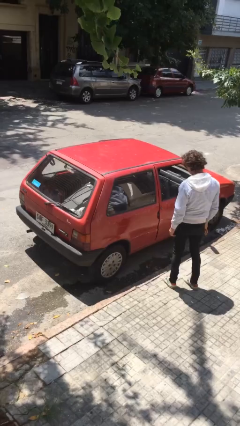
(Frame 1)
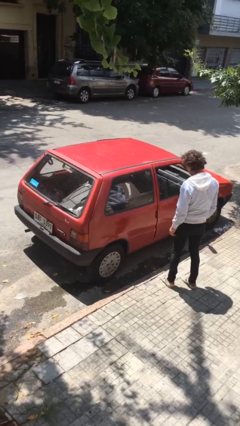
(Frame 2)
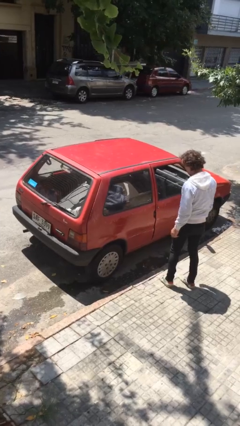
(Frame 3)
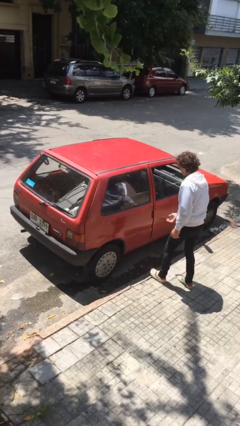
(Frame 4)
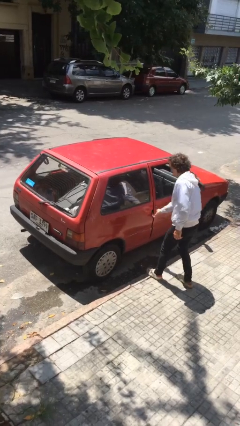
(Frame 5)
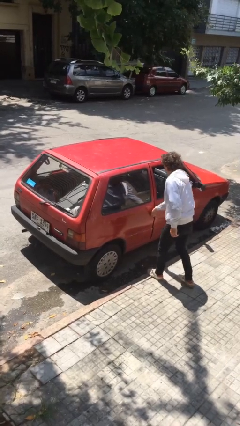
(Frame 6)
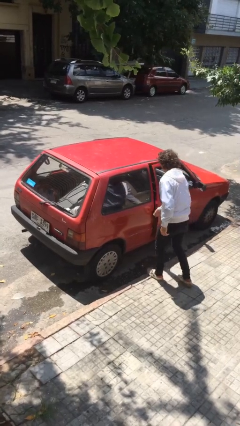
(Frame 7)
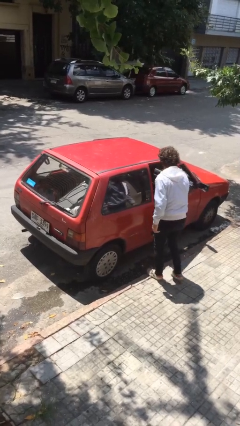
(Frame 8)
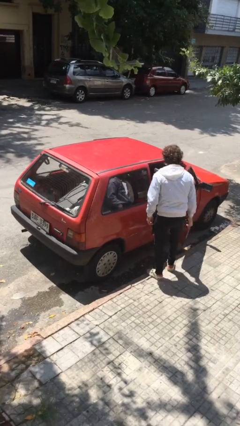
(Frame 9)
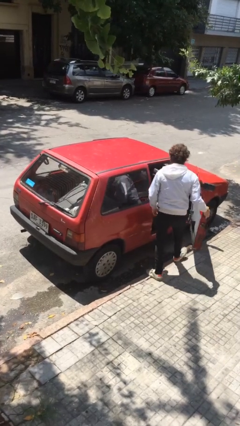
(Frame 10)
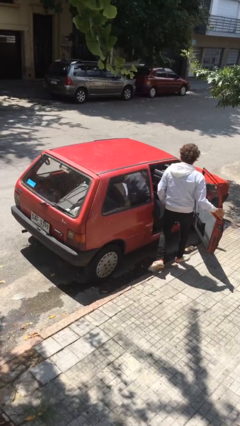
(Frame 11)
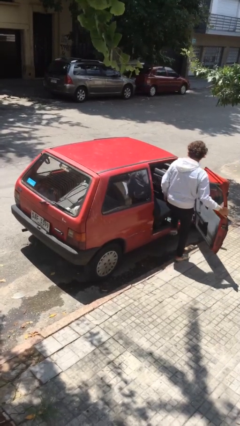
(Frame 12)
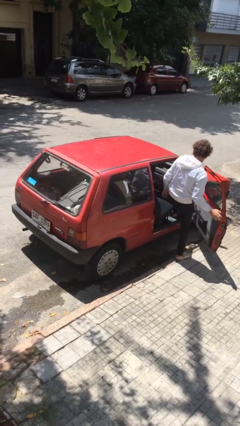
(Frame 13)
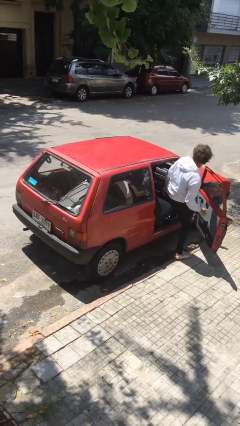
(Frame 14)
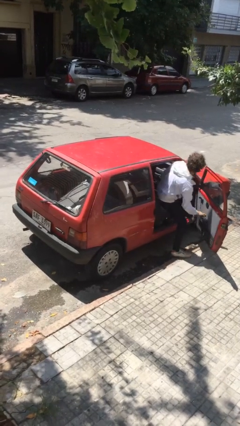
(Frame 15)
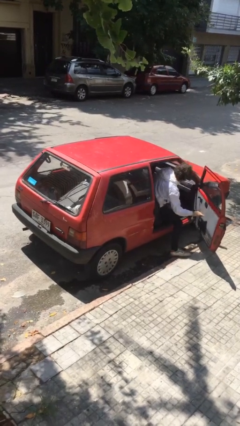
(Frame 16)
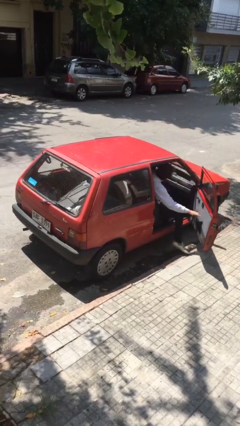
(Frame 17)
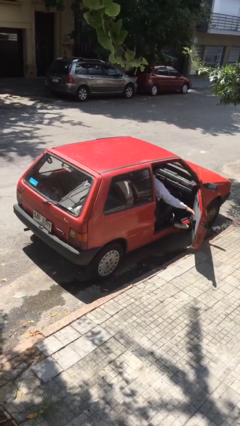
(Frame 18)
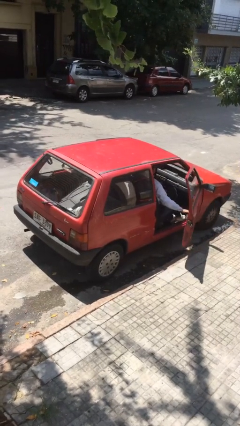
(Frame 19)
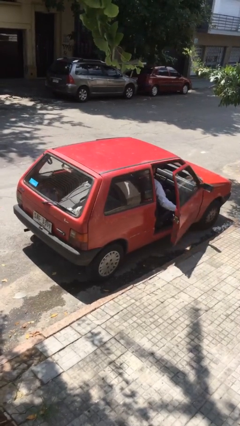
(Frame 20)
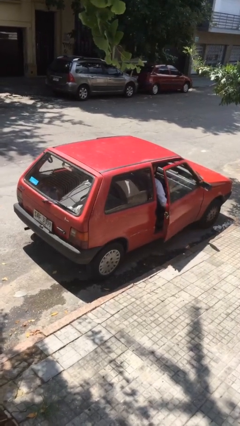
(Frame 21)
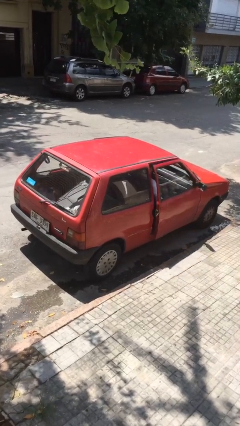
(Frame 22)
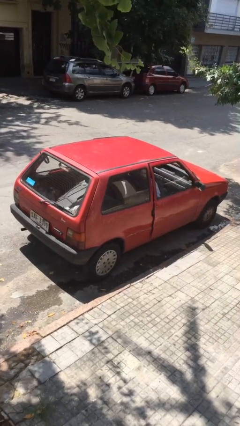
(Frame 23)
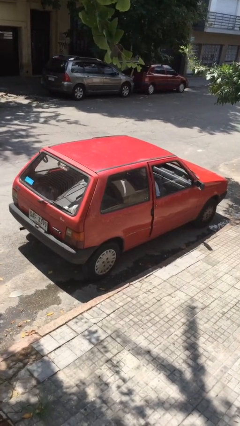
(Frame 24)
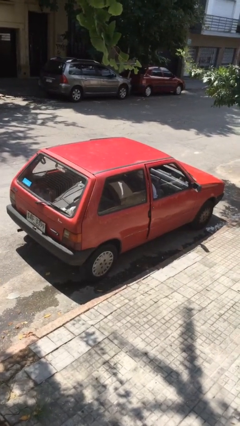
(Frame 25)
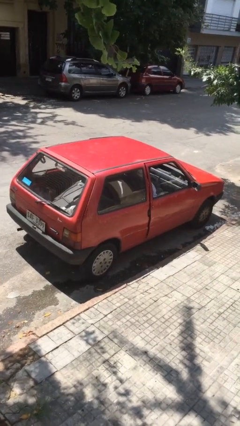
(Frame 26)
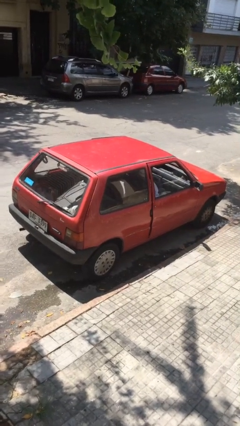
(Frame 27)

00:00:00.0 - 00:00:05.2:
car picks up person

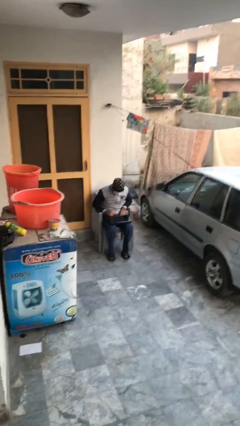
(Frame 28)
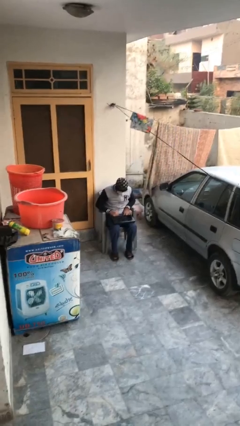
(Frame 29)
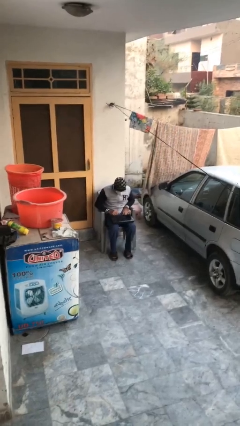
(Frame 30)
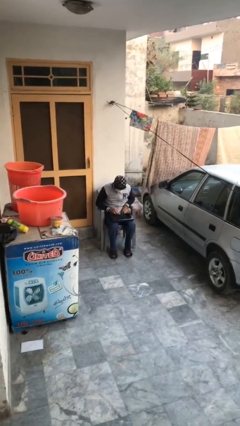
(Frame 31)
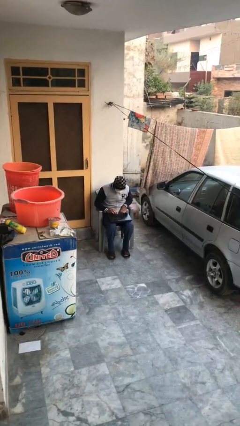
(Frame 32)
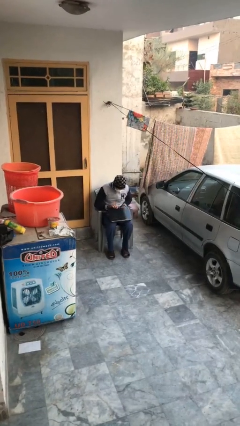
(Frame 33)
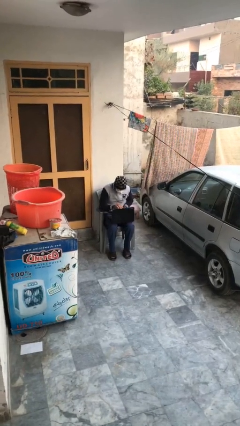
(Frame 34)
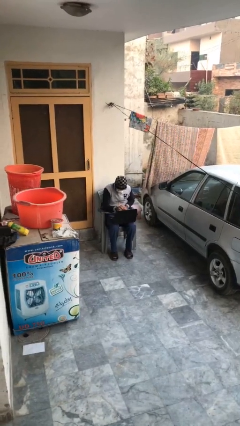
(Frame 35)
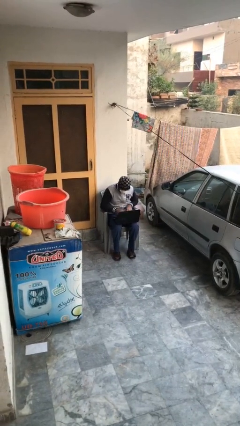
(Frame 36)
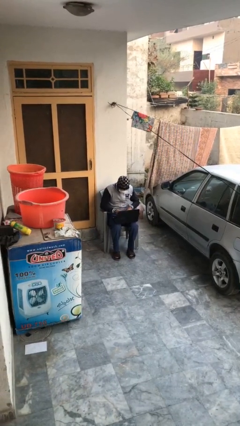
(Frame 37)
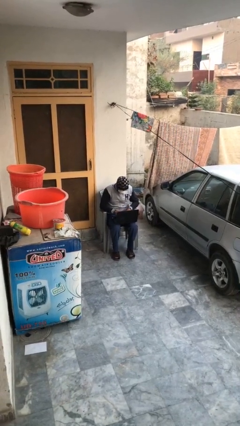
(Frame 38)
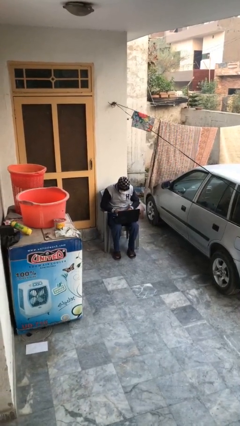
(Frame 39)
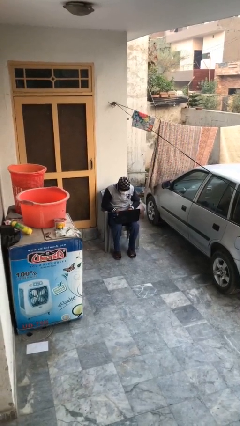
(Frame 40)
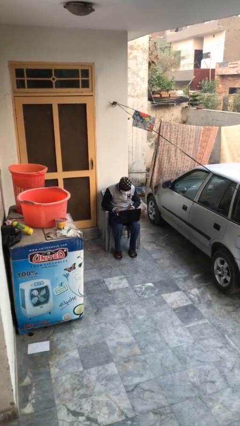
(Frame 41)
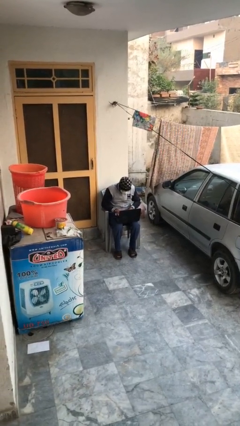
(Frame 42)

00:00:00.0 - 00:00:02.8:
person interacts with laptop

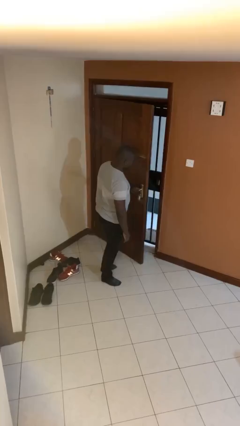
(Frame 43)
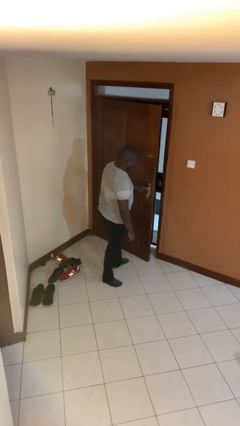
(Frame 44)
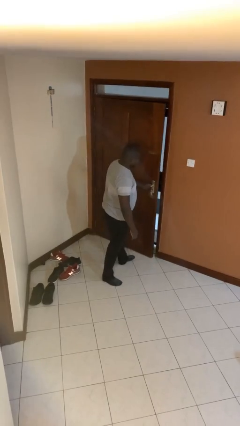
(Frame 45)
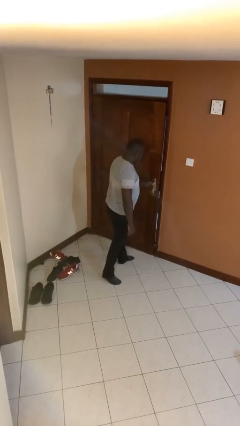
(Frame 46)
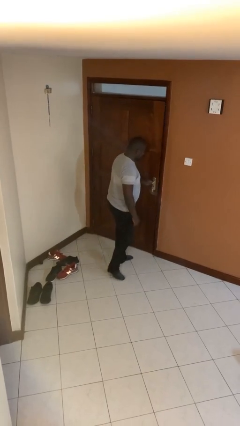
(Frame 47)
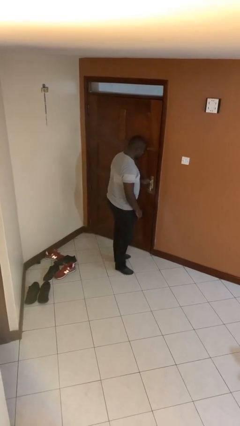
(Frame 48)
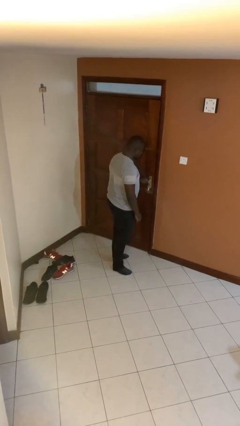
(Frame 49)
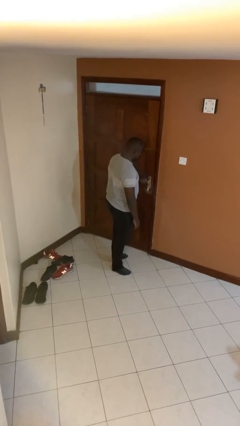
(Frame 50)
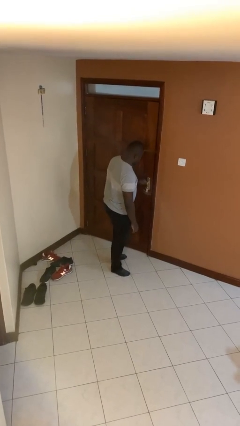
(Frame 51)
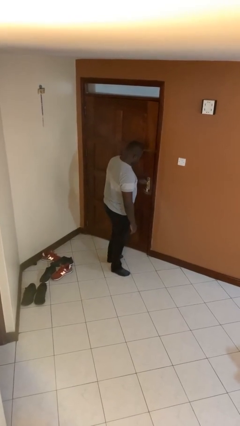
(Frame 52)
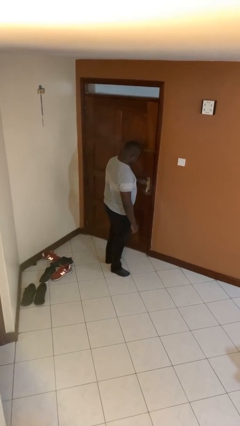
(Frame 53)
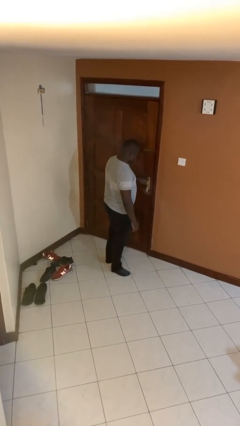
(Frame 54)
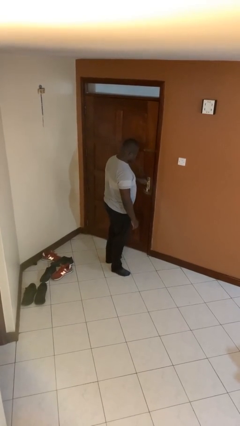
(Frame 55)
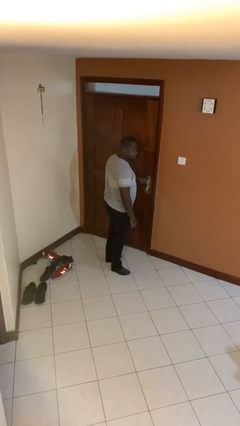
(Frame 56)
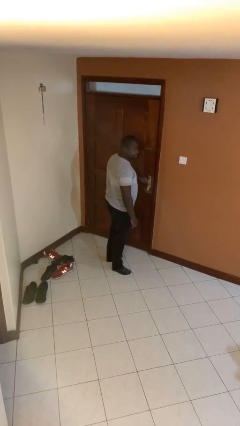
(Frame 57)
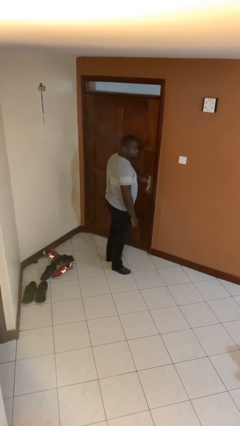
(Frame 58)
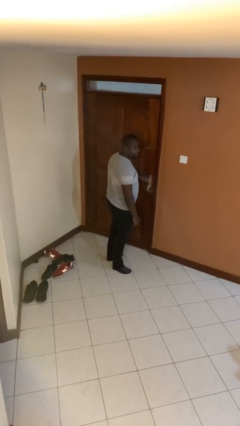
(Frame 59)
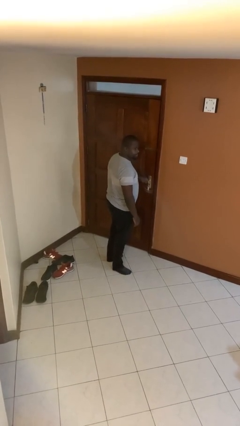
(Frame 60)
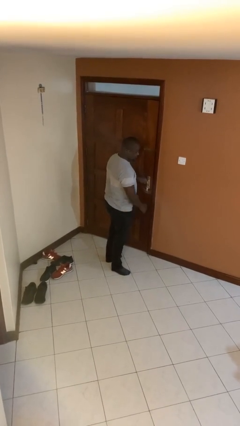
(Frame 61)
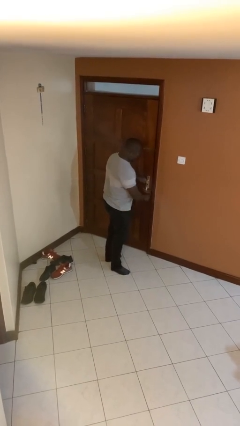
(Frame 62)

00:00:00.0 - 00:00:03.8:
person closes facility door

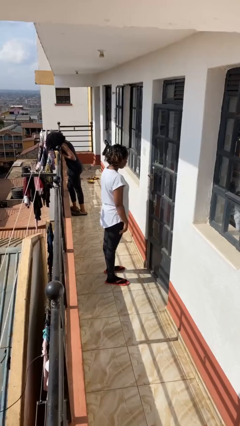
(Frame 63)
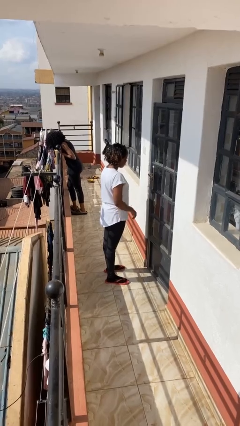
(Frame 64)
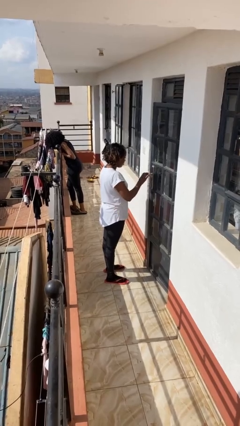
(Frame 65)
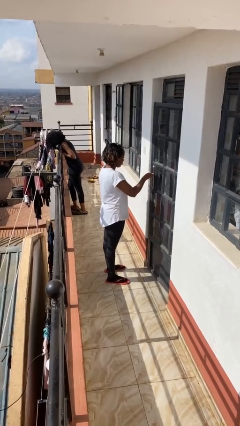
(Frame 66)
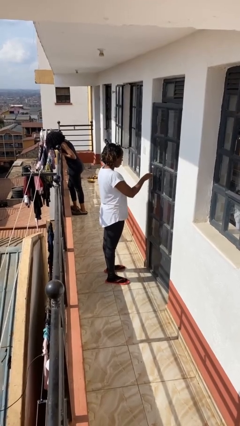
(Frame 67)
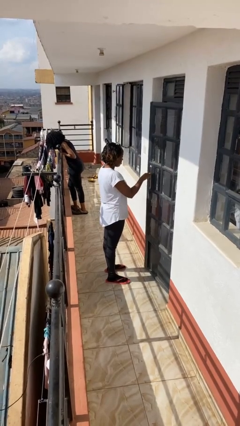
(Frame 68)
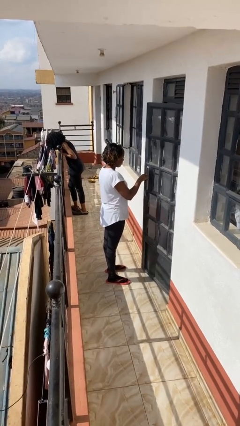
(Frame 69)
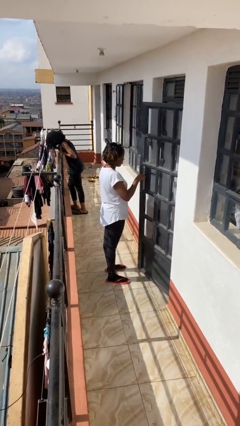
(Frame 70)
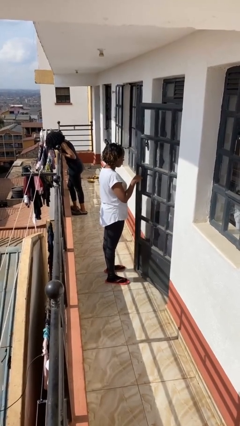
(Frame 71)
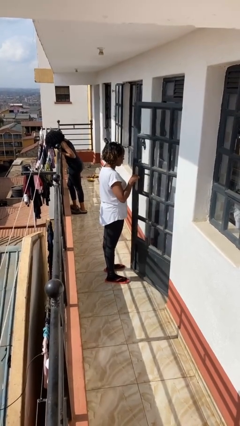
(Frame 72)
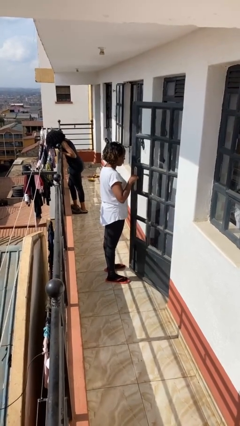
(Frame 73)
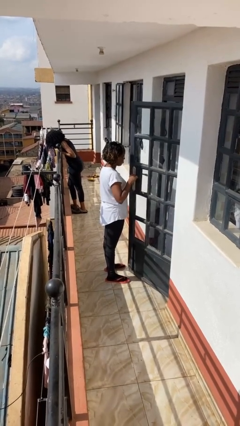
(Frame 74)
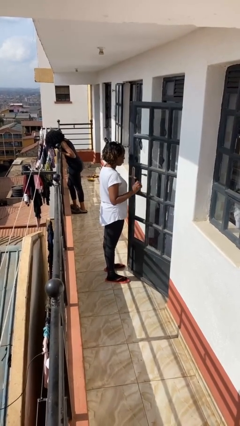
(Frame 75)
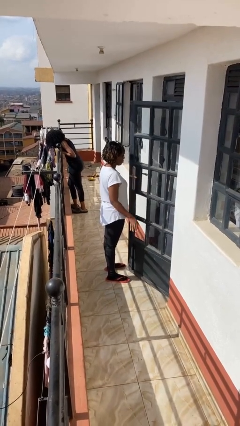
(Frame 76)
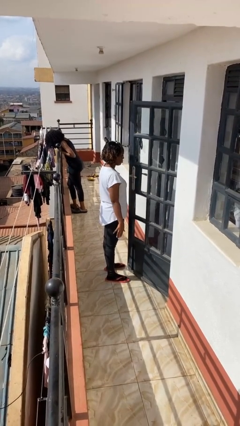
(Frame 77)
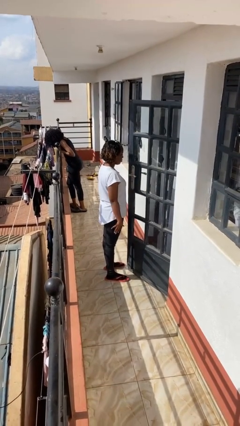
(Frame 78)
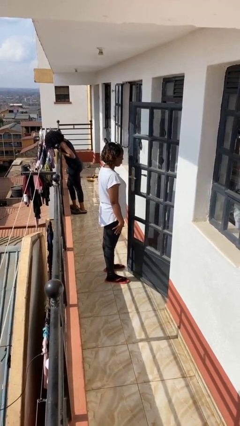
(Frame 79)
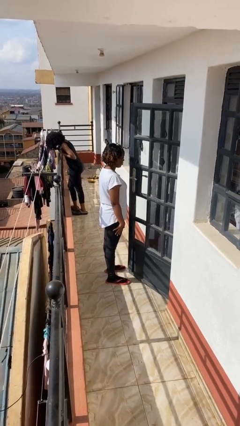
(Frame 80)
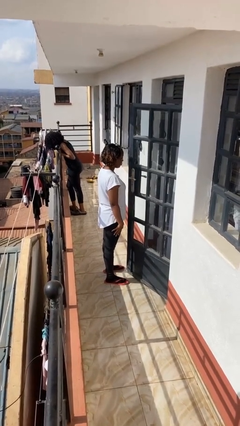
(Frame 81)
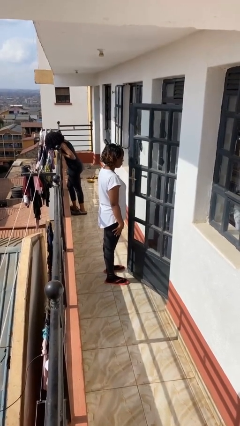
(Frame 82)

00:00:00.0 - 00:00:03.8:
person opens facility door

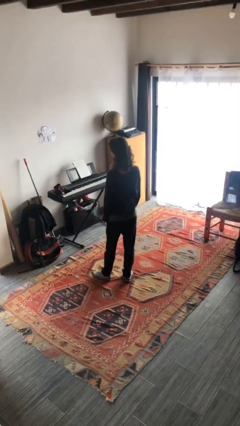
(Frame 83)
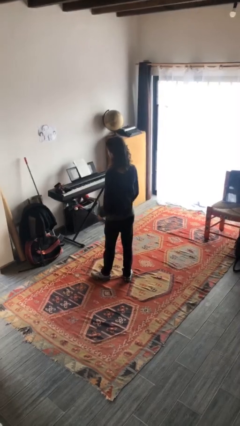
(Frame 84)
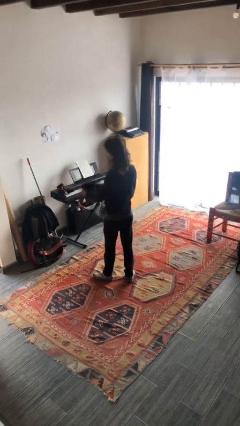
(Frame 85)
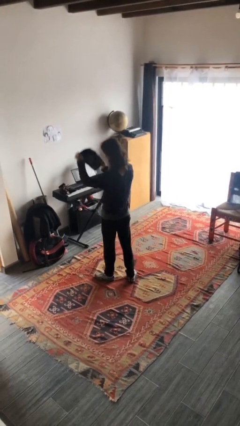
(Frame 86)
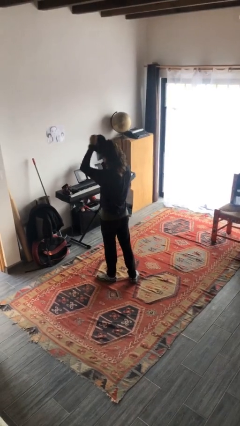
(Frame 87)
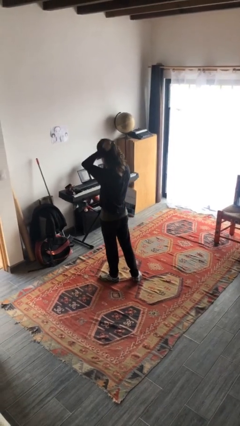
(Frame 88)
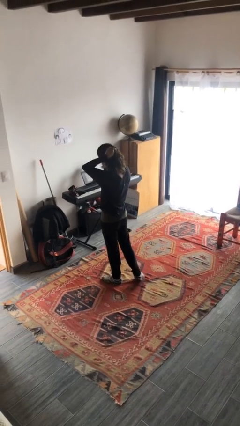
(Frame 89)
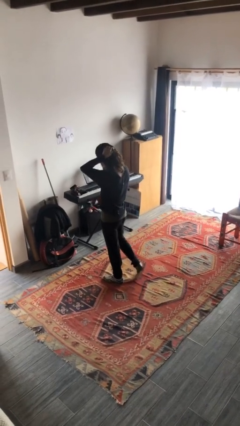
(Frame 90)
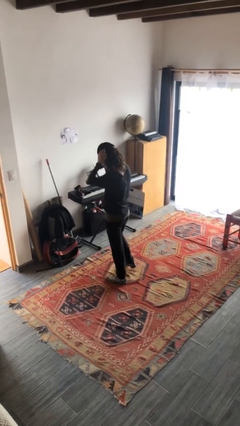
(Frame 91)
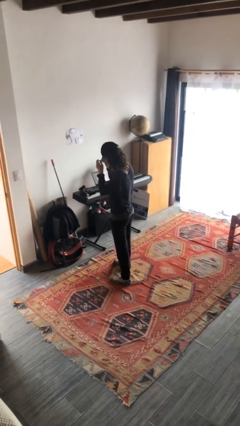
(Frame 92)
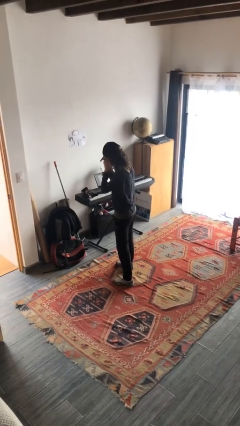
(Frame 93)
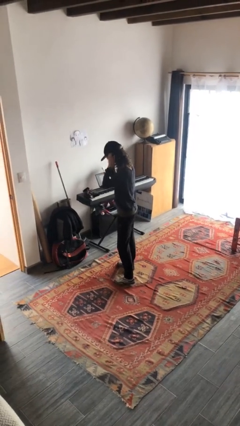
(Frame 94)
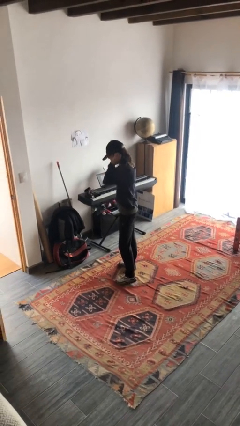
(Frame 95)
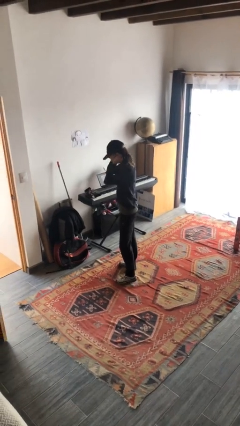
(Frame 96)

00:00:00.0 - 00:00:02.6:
person puts on hat
